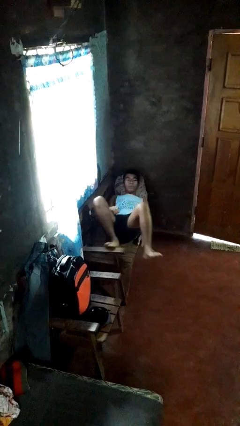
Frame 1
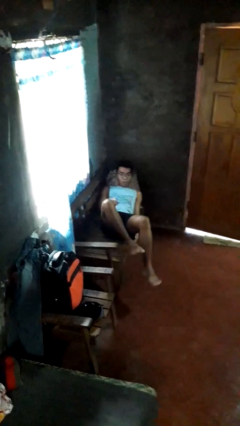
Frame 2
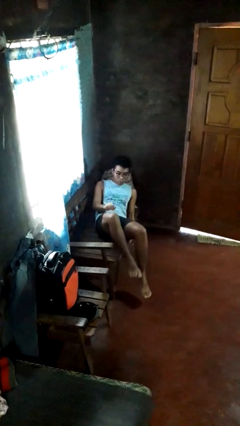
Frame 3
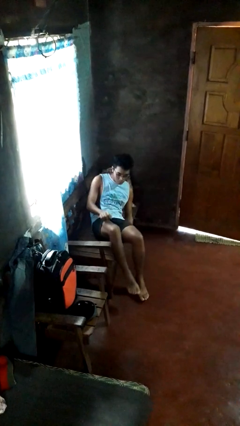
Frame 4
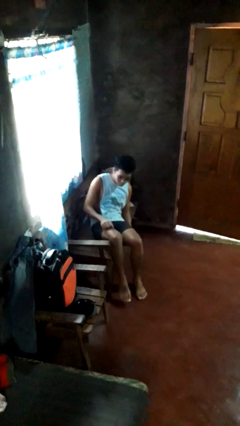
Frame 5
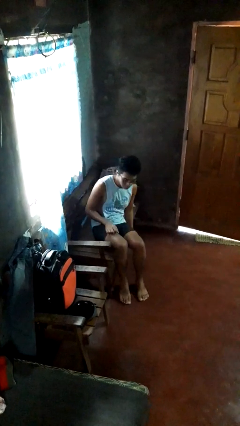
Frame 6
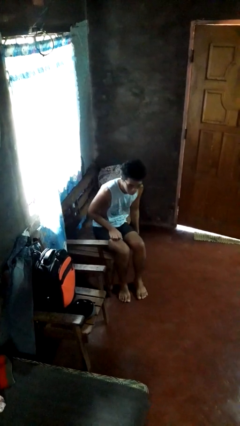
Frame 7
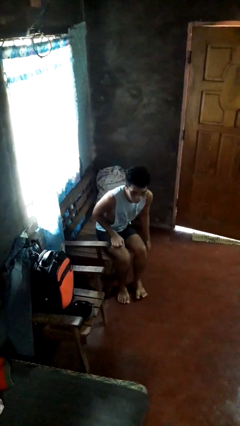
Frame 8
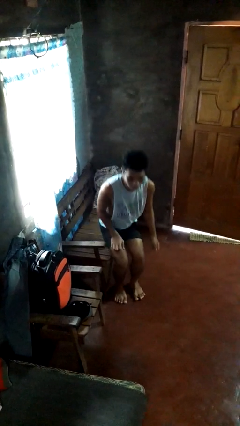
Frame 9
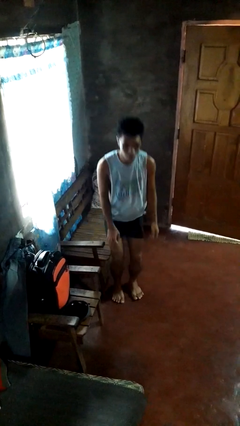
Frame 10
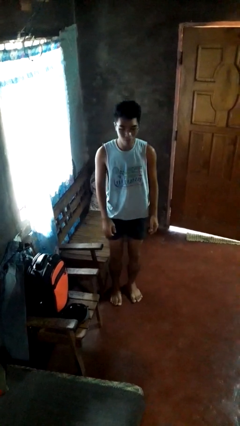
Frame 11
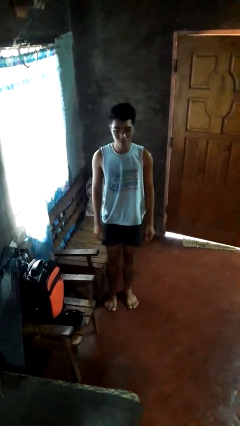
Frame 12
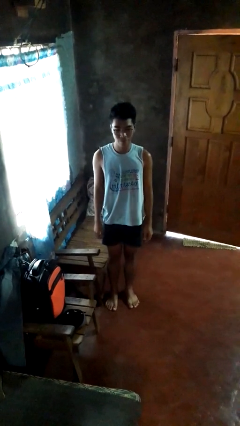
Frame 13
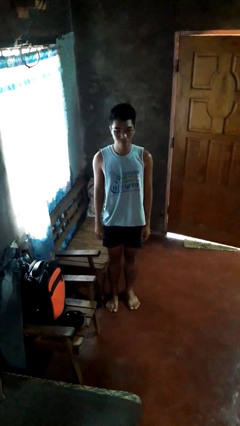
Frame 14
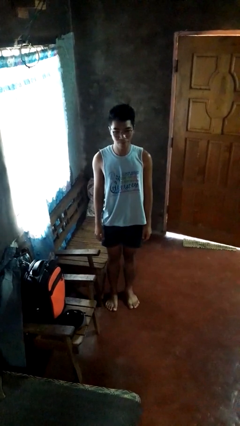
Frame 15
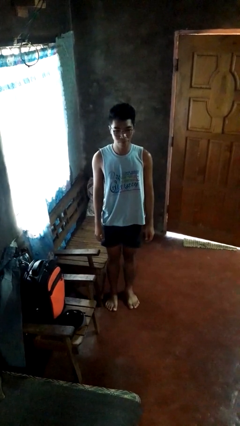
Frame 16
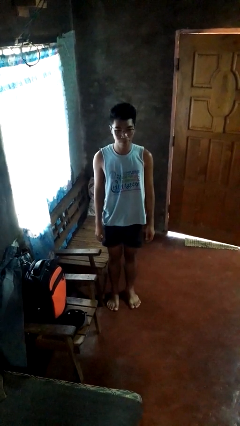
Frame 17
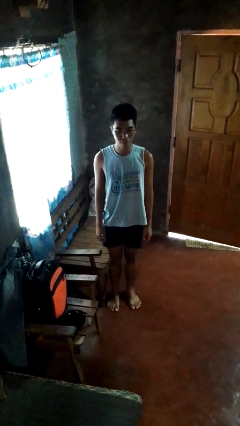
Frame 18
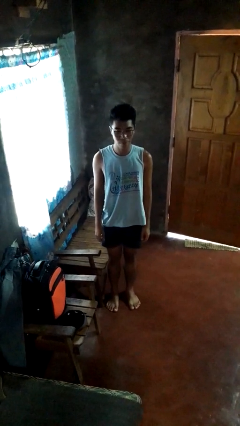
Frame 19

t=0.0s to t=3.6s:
person stands up

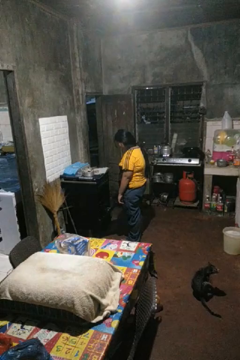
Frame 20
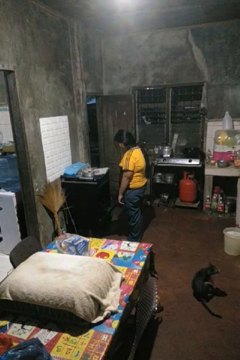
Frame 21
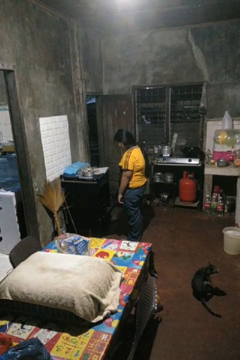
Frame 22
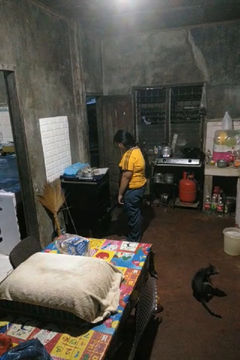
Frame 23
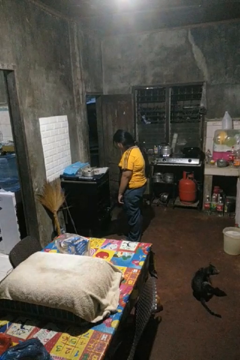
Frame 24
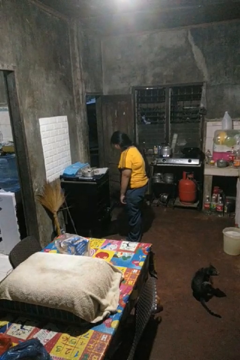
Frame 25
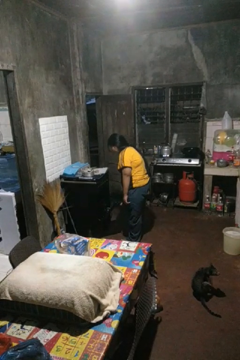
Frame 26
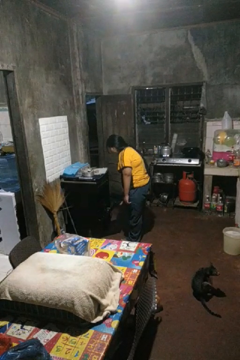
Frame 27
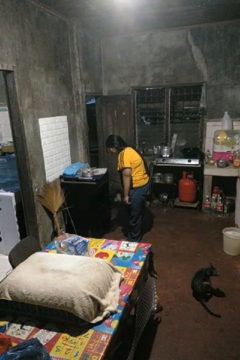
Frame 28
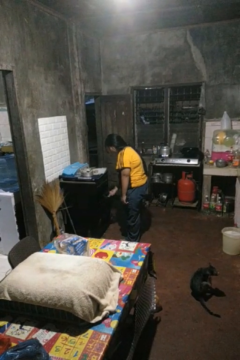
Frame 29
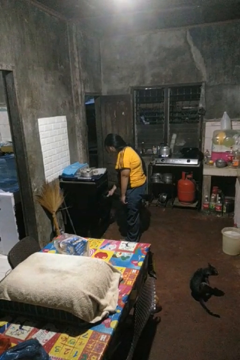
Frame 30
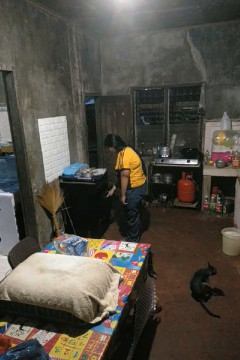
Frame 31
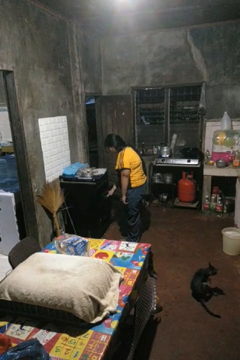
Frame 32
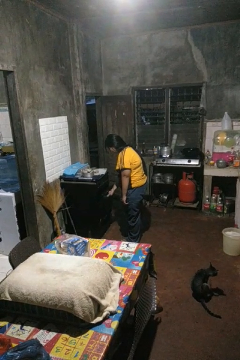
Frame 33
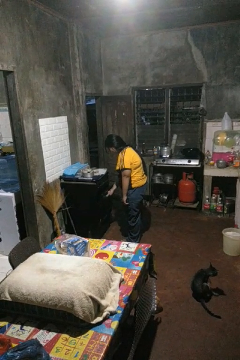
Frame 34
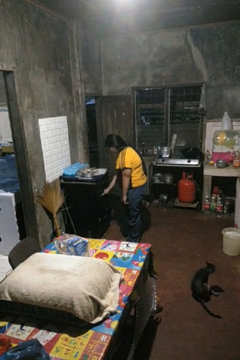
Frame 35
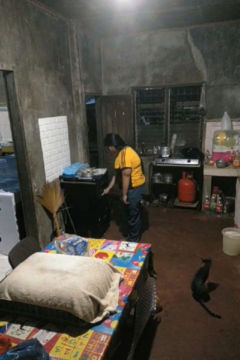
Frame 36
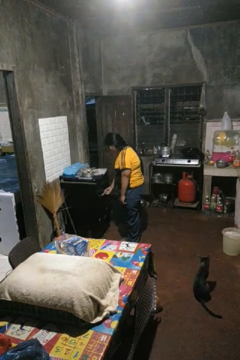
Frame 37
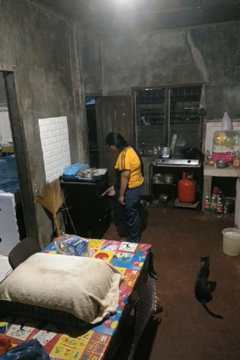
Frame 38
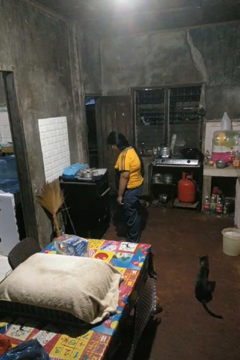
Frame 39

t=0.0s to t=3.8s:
person closes oven door

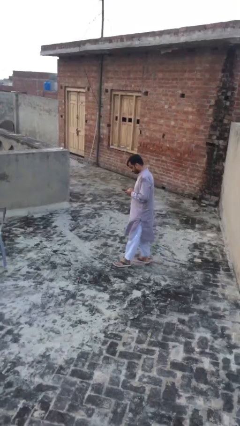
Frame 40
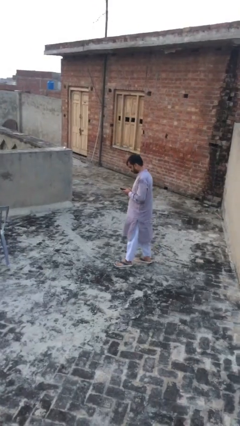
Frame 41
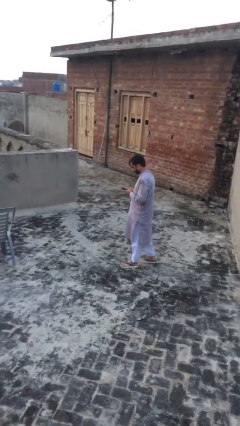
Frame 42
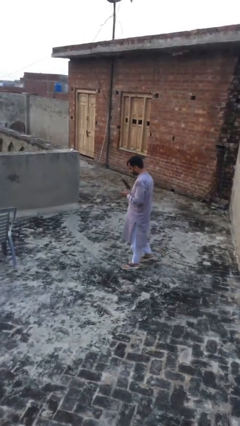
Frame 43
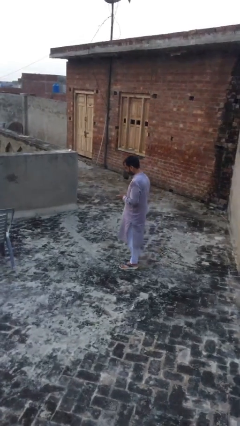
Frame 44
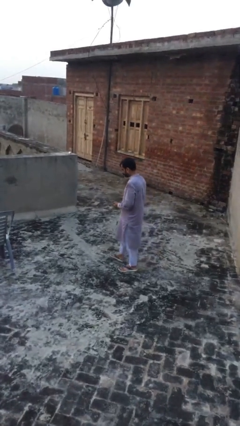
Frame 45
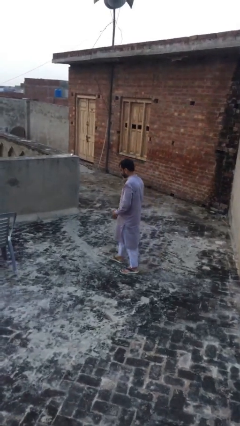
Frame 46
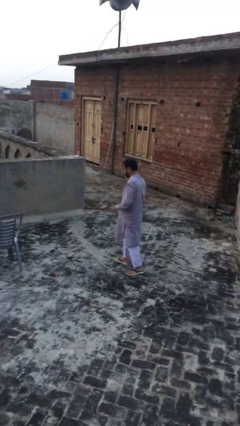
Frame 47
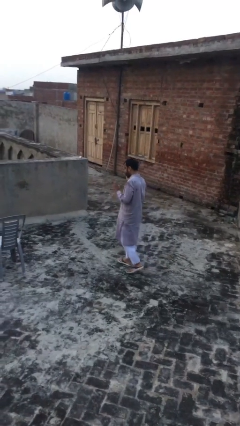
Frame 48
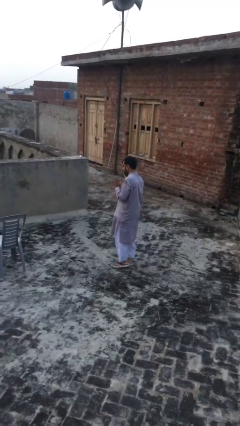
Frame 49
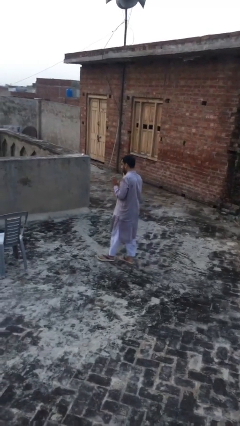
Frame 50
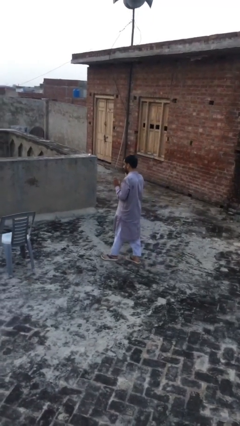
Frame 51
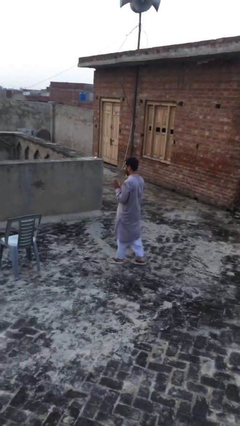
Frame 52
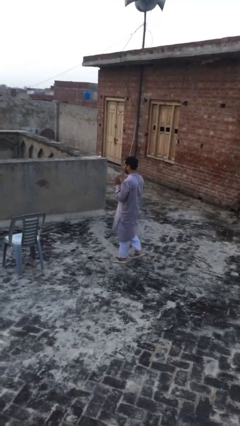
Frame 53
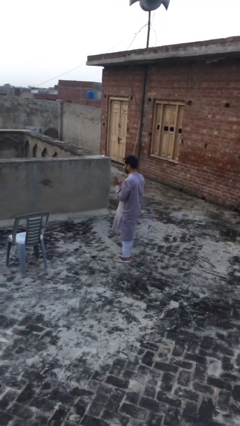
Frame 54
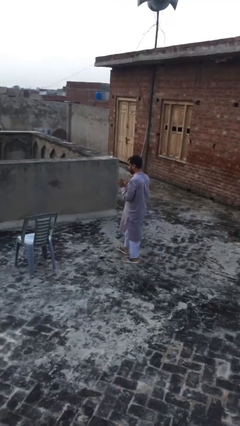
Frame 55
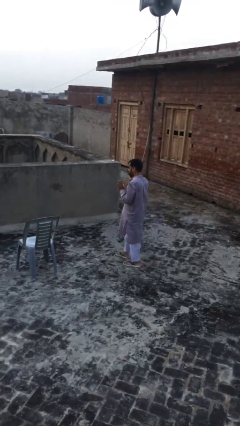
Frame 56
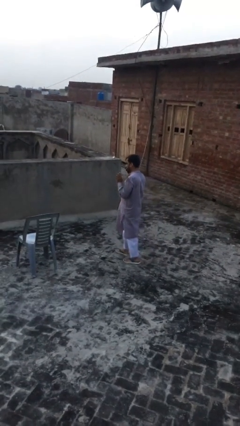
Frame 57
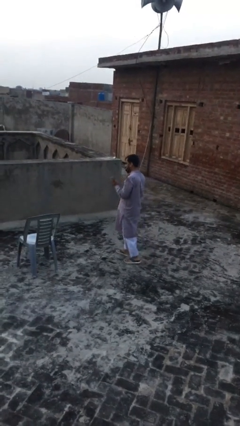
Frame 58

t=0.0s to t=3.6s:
person talks on phone

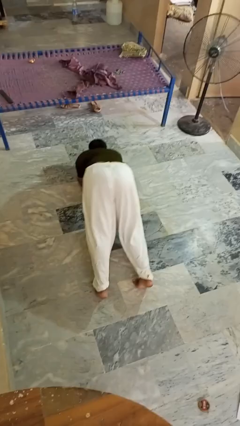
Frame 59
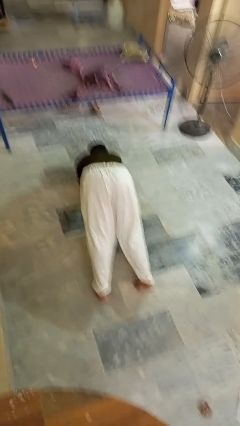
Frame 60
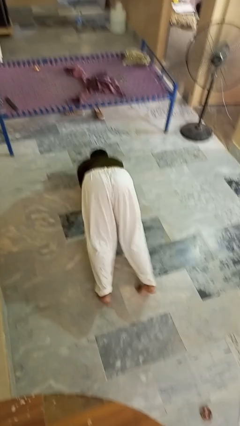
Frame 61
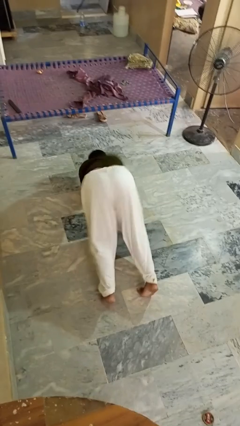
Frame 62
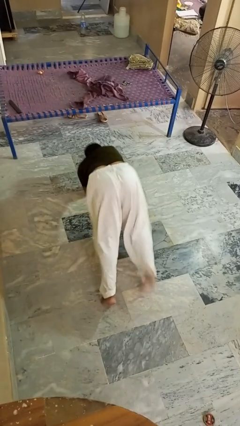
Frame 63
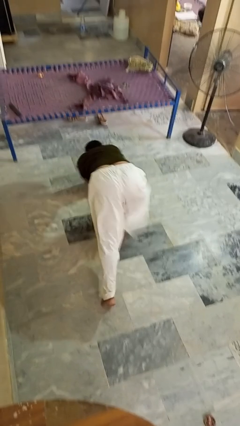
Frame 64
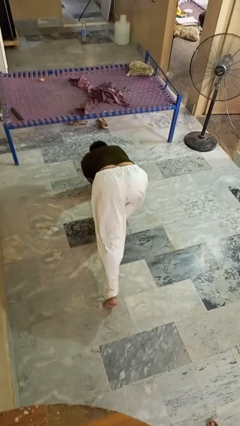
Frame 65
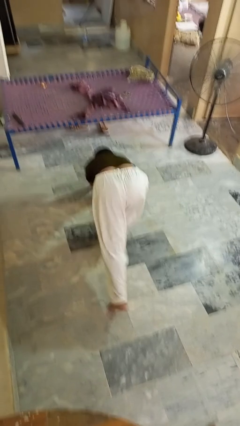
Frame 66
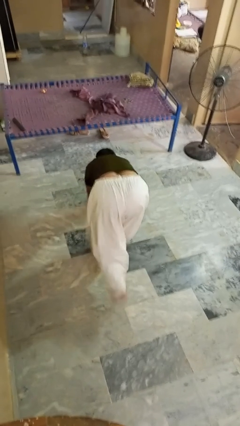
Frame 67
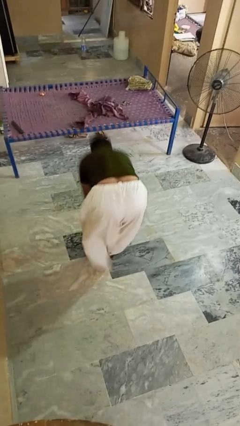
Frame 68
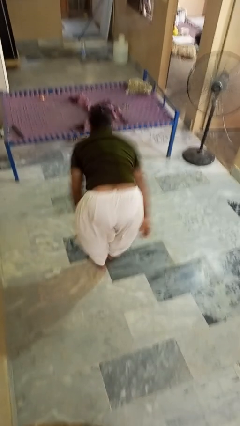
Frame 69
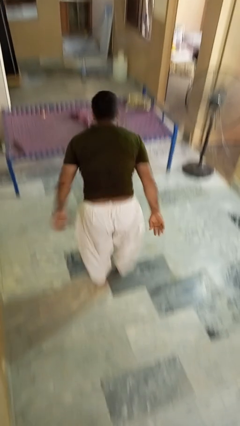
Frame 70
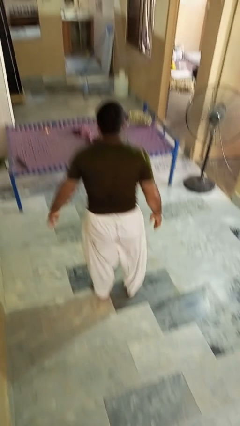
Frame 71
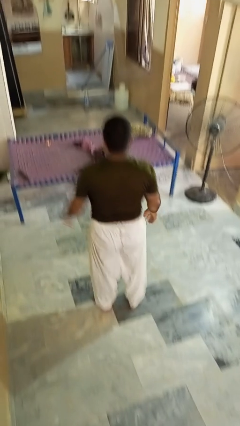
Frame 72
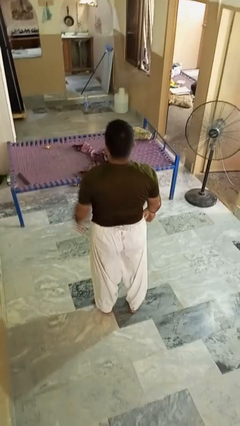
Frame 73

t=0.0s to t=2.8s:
person stands up from floor

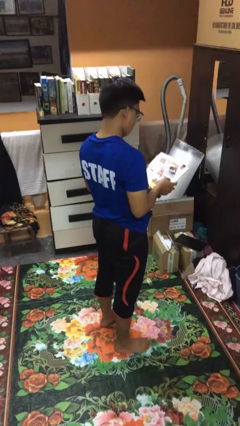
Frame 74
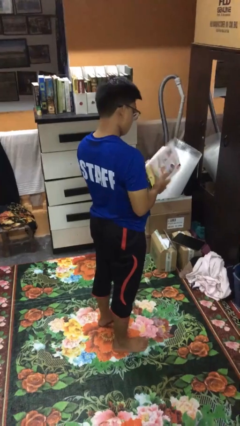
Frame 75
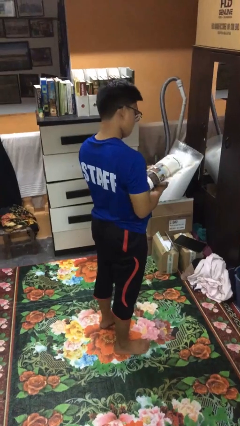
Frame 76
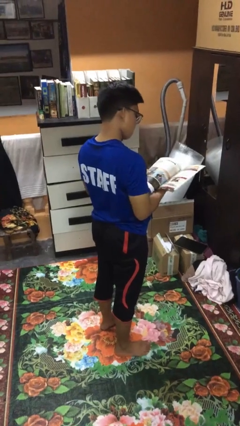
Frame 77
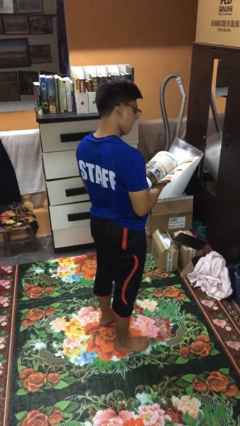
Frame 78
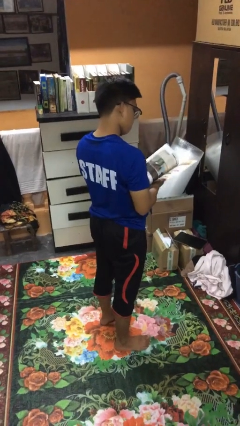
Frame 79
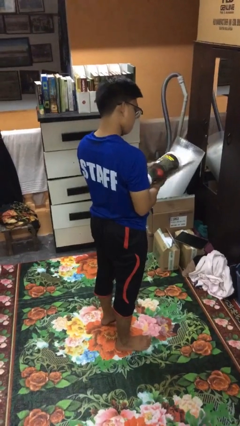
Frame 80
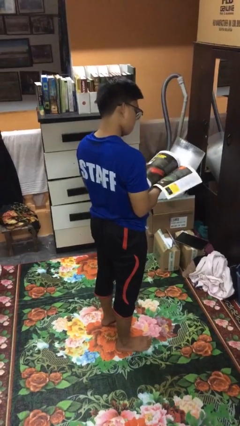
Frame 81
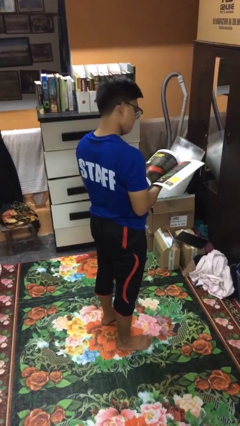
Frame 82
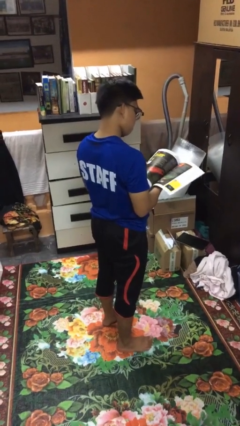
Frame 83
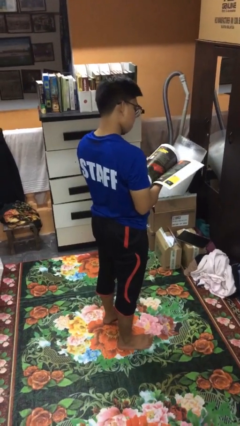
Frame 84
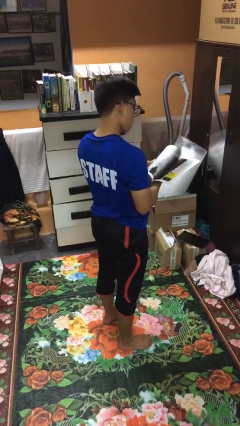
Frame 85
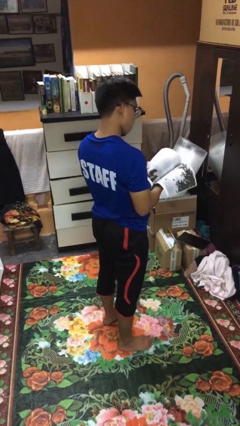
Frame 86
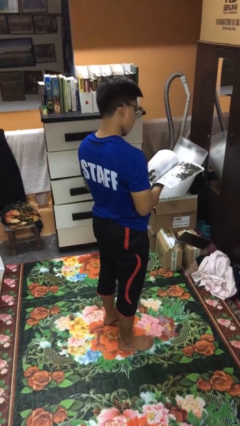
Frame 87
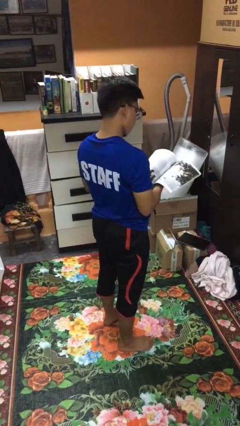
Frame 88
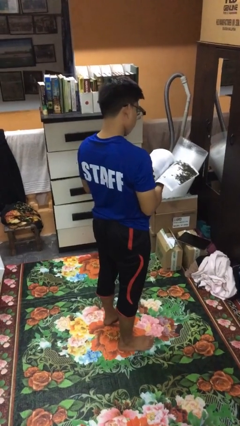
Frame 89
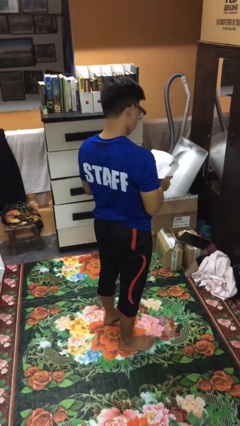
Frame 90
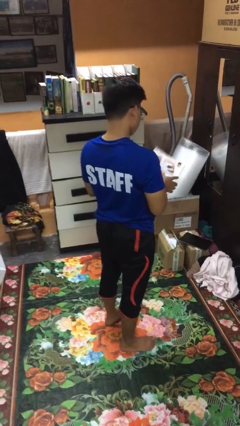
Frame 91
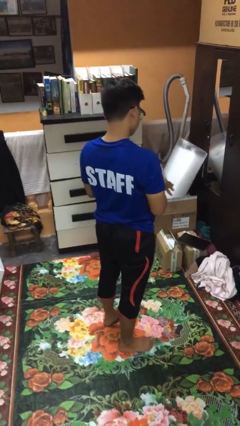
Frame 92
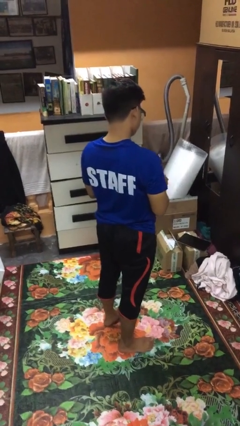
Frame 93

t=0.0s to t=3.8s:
person reads magazine

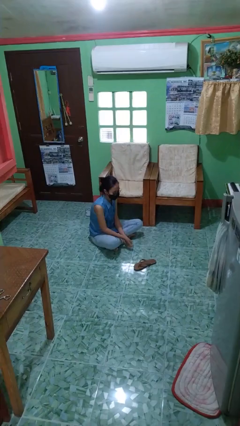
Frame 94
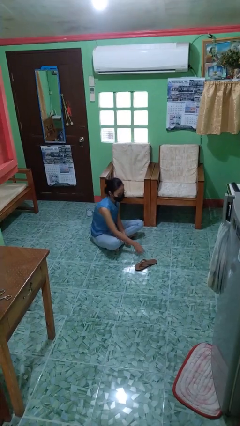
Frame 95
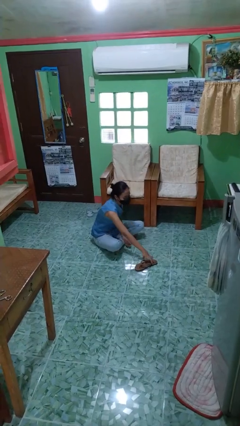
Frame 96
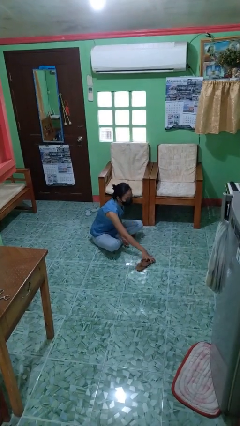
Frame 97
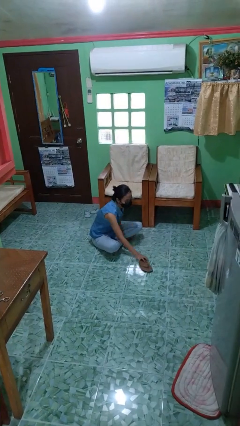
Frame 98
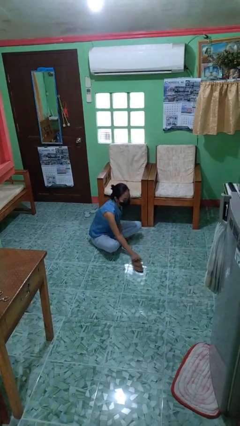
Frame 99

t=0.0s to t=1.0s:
person picks up object from floor
